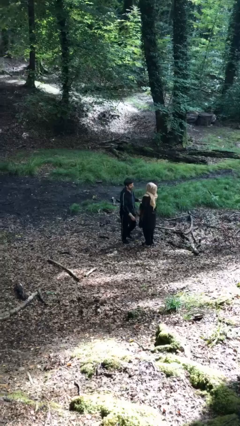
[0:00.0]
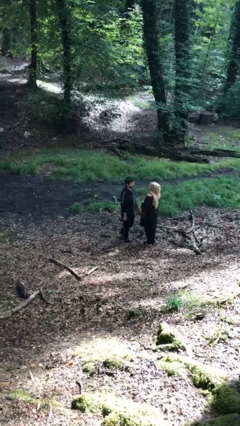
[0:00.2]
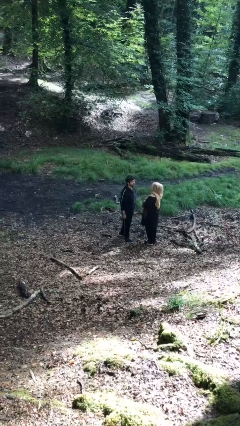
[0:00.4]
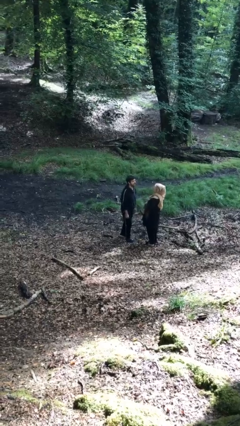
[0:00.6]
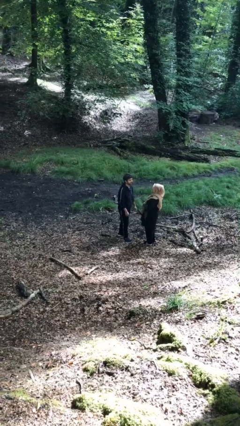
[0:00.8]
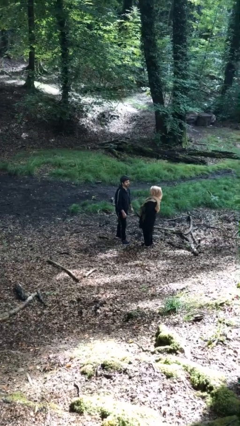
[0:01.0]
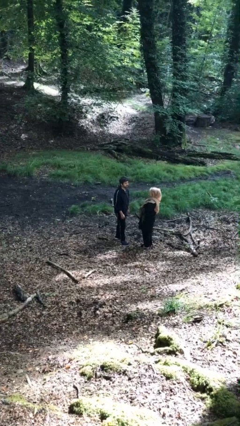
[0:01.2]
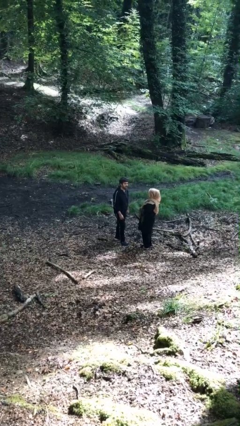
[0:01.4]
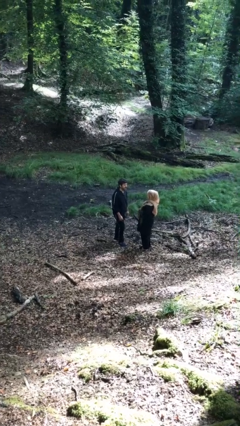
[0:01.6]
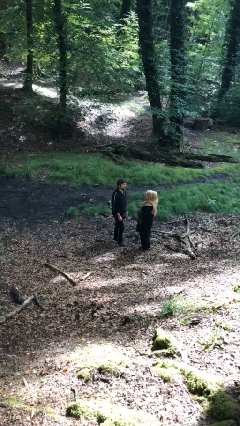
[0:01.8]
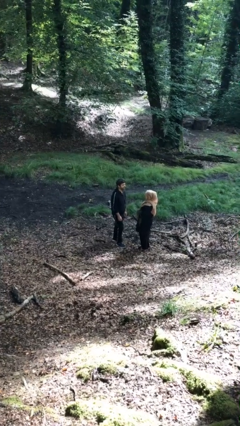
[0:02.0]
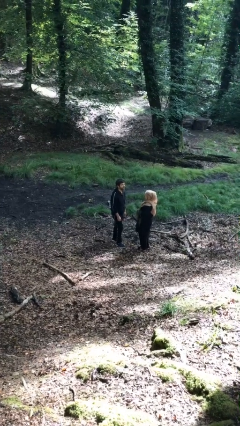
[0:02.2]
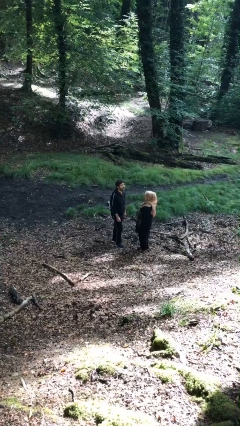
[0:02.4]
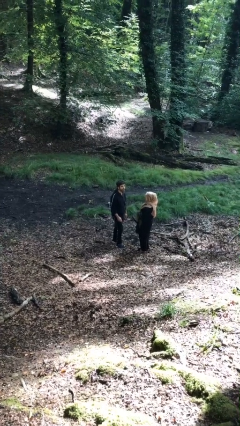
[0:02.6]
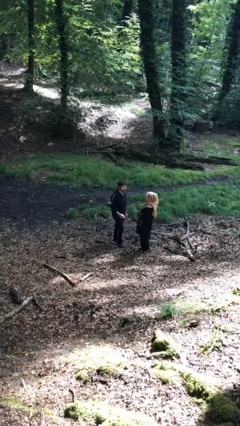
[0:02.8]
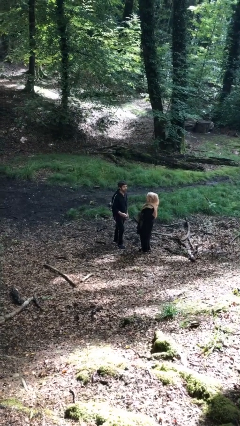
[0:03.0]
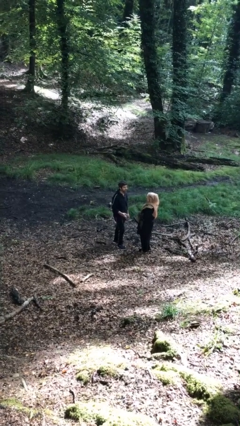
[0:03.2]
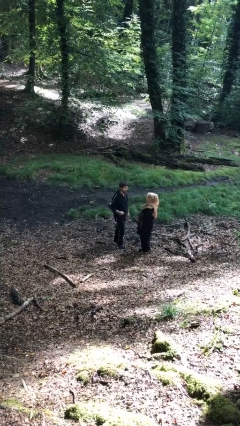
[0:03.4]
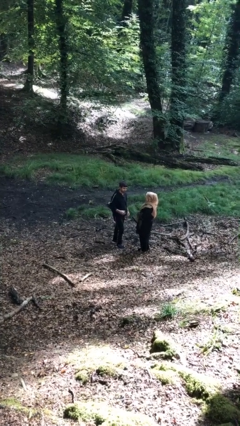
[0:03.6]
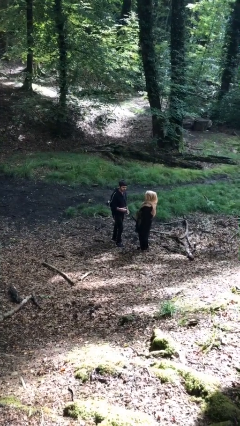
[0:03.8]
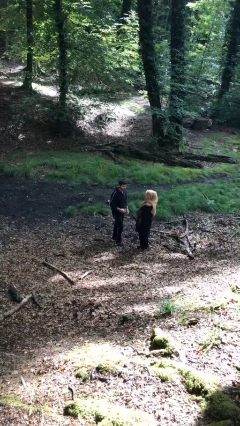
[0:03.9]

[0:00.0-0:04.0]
person talks to person

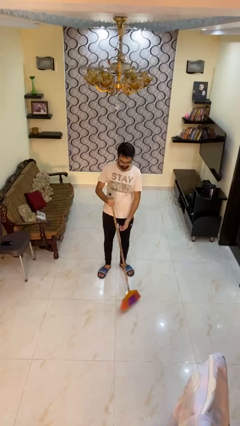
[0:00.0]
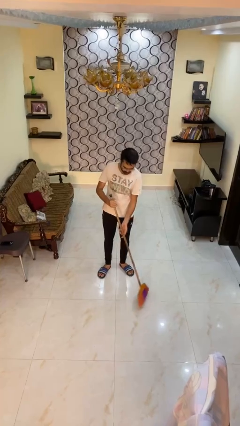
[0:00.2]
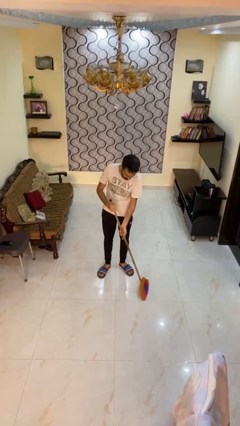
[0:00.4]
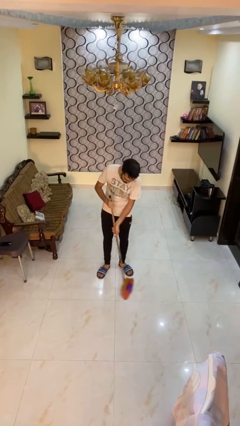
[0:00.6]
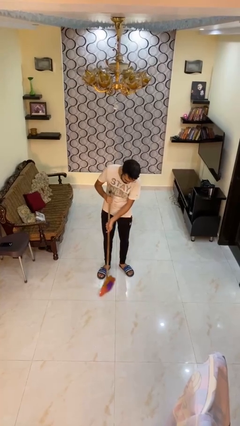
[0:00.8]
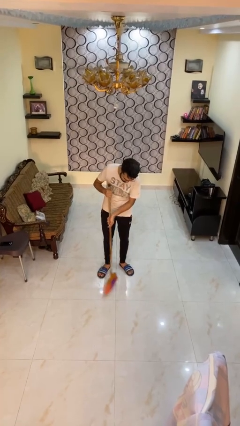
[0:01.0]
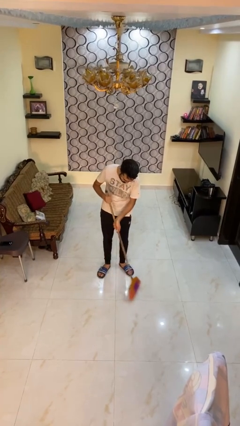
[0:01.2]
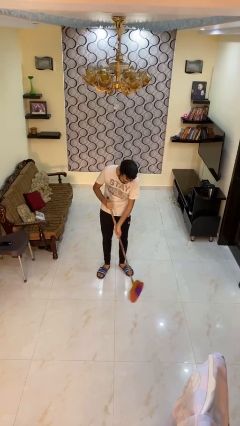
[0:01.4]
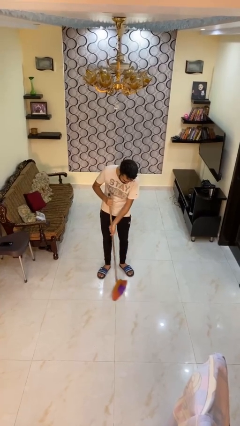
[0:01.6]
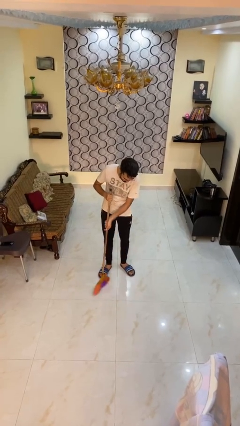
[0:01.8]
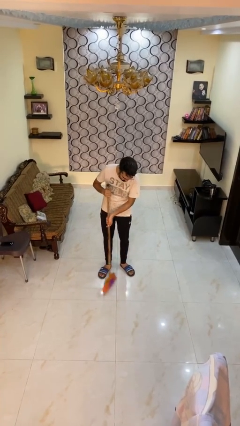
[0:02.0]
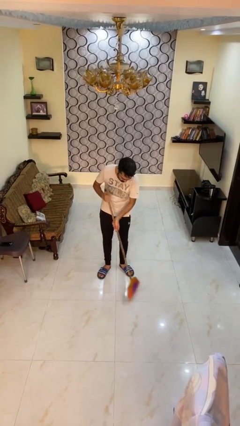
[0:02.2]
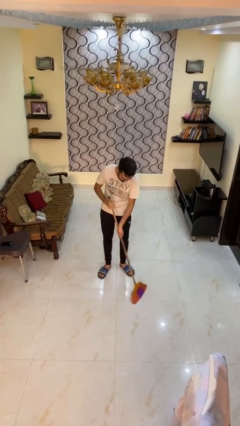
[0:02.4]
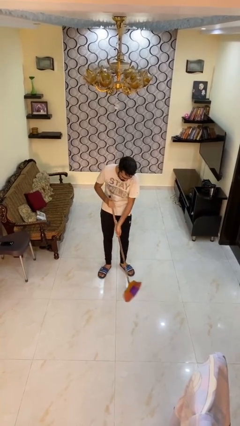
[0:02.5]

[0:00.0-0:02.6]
person mops

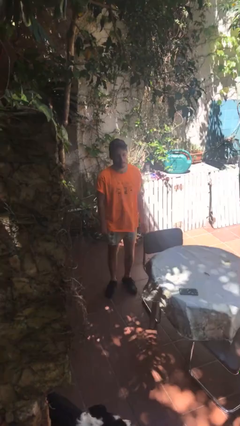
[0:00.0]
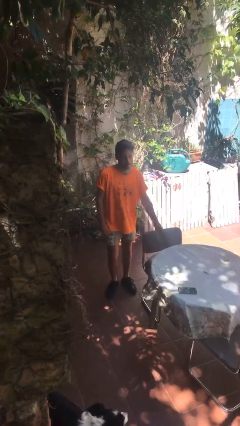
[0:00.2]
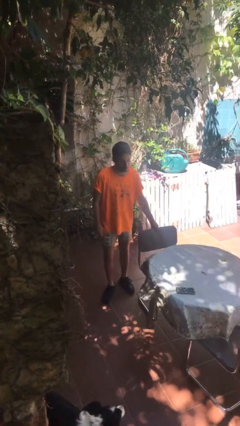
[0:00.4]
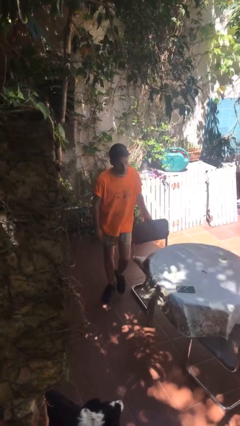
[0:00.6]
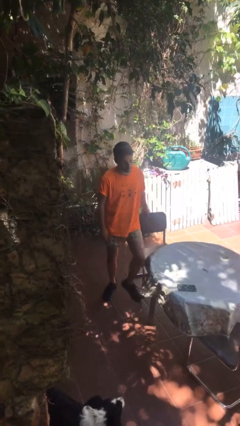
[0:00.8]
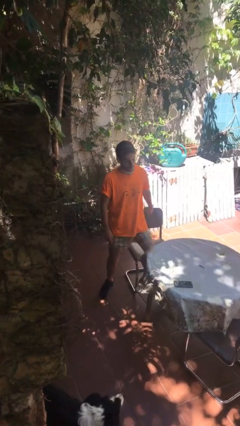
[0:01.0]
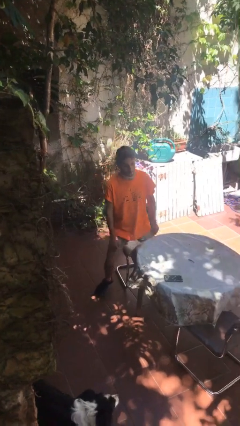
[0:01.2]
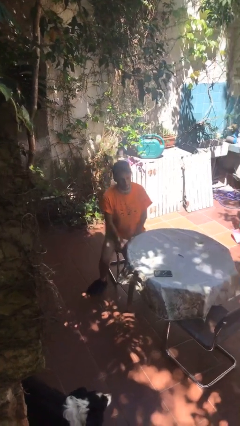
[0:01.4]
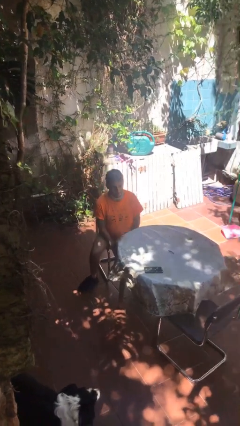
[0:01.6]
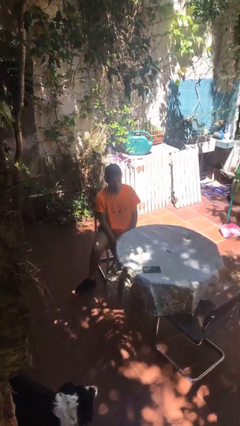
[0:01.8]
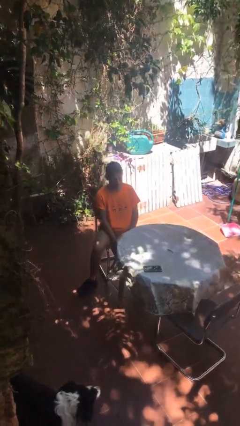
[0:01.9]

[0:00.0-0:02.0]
person sits down

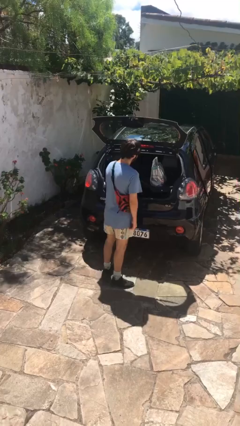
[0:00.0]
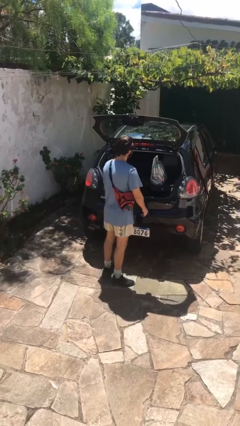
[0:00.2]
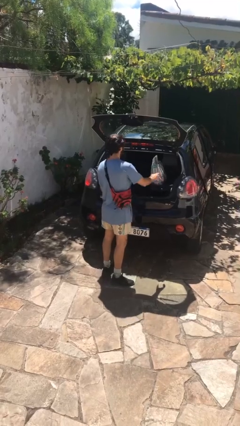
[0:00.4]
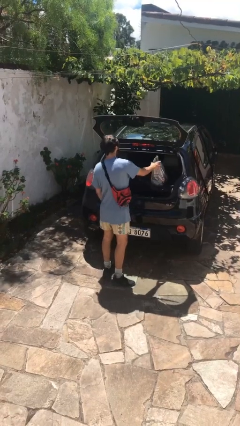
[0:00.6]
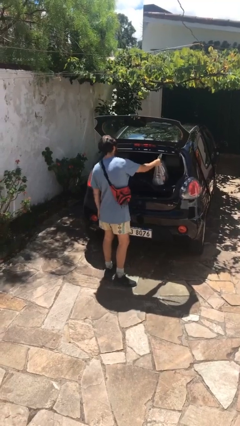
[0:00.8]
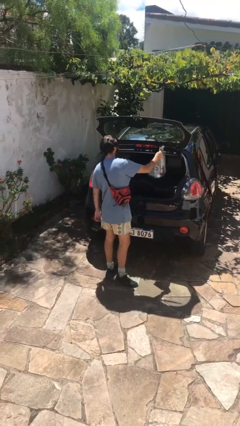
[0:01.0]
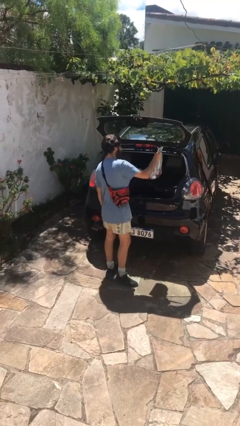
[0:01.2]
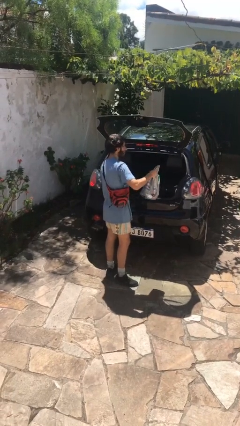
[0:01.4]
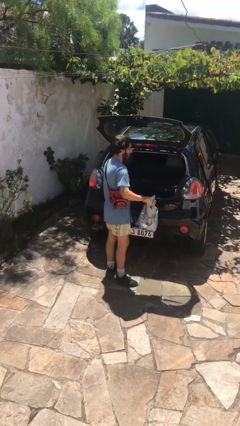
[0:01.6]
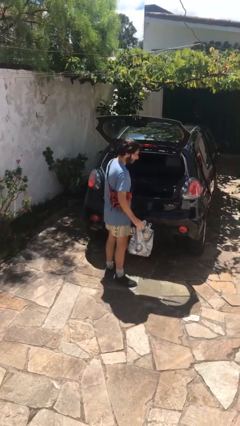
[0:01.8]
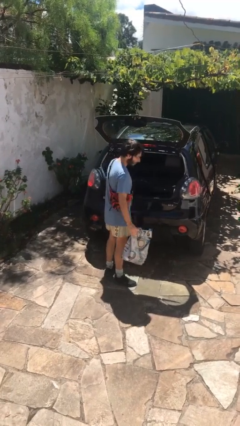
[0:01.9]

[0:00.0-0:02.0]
person unloads car

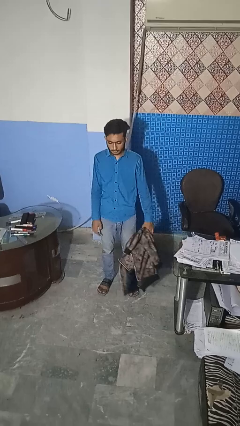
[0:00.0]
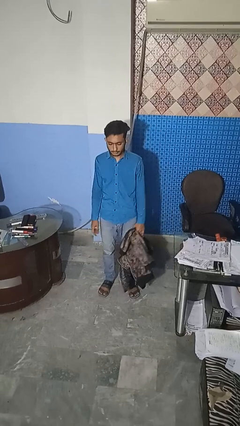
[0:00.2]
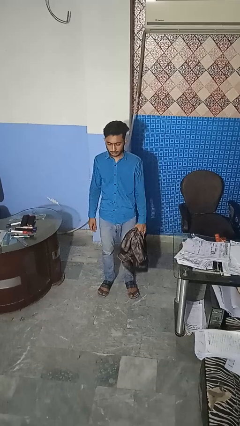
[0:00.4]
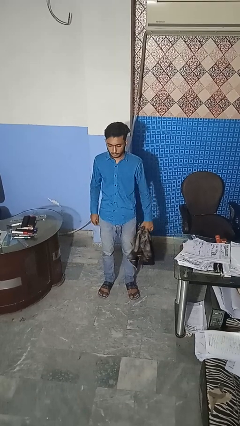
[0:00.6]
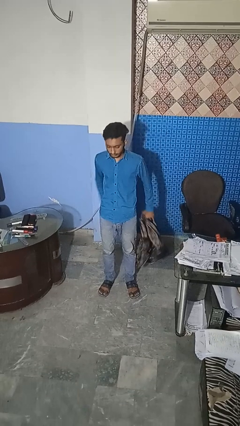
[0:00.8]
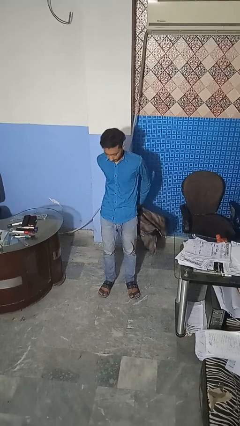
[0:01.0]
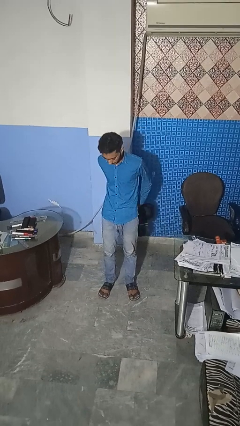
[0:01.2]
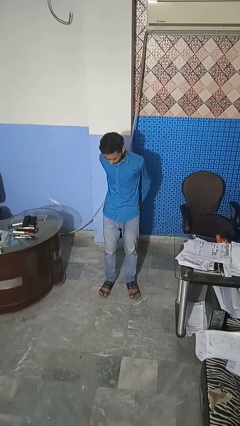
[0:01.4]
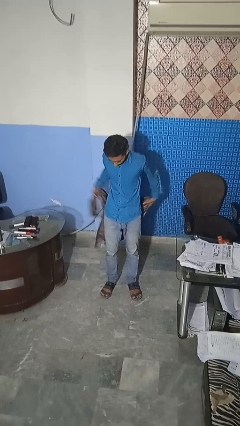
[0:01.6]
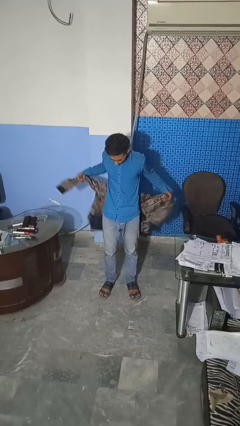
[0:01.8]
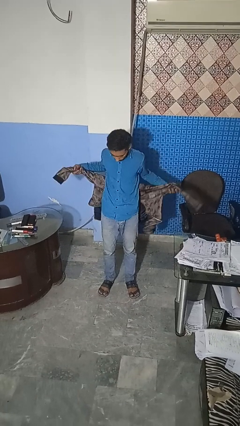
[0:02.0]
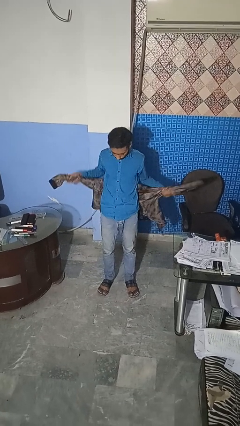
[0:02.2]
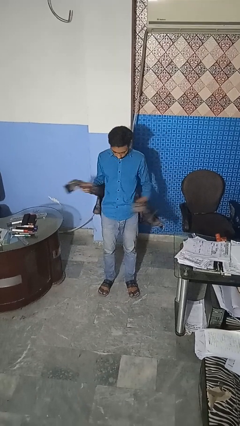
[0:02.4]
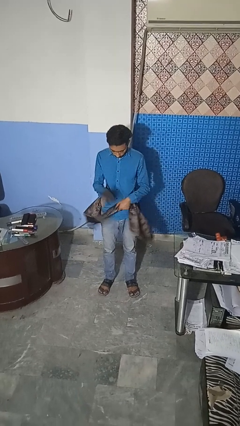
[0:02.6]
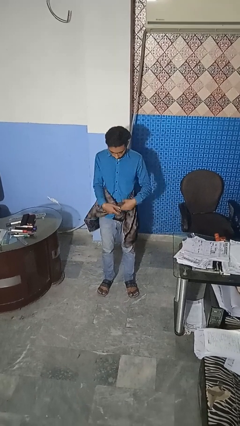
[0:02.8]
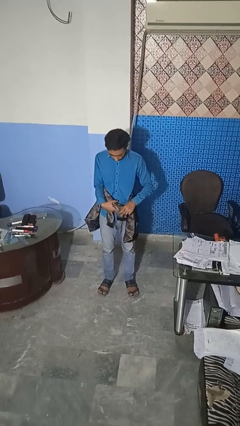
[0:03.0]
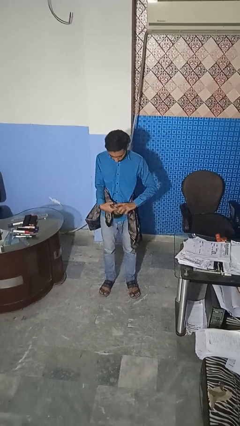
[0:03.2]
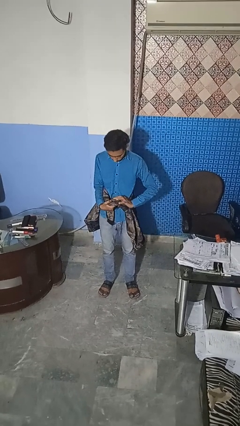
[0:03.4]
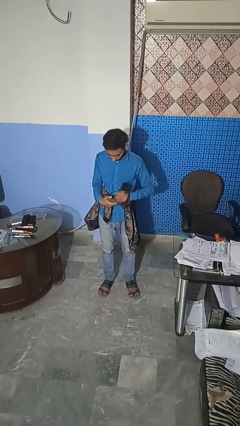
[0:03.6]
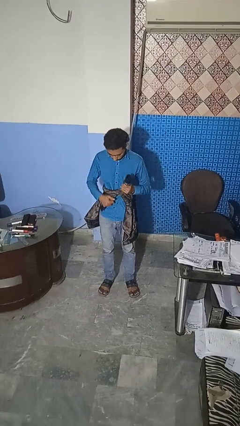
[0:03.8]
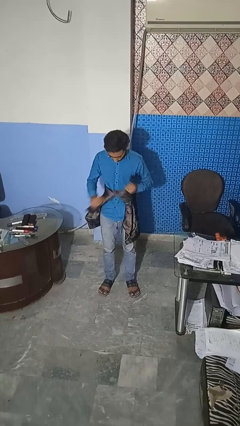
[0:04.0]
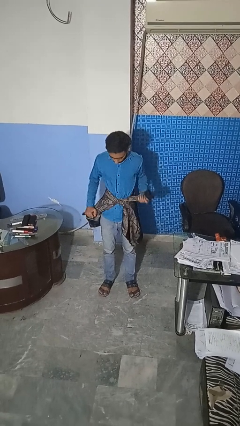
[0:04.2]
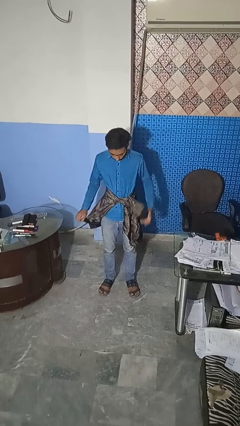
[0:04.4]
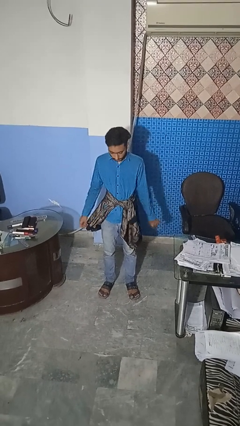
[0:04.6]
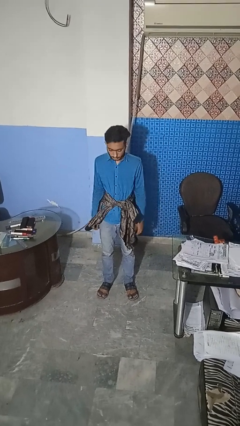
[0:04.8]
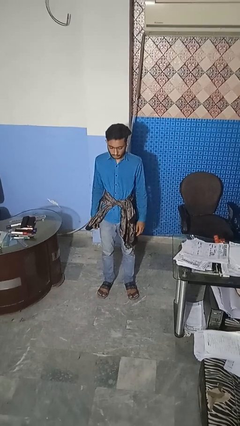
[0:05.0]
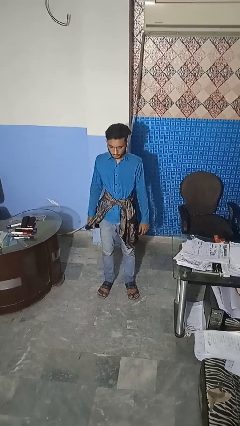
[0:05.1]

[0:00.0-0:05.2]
person ties jacket around waist

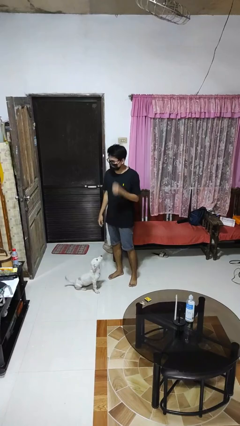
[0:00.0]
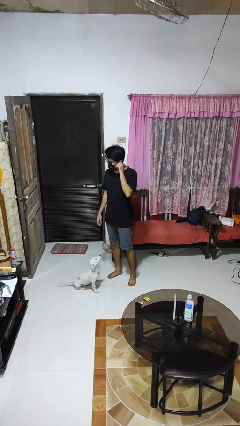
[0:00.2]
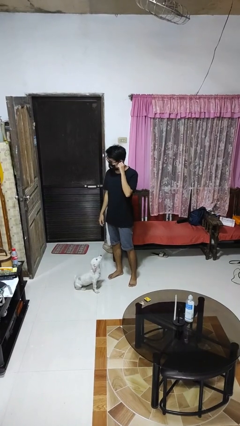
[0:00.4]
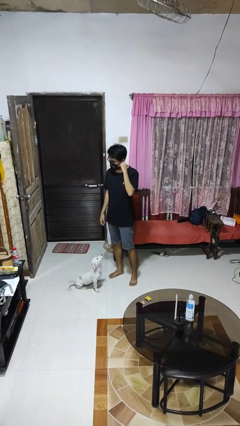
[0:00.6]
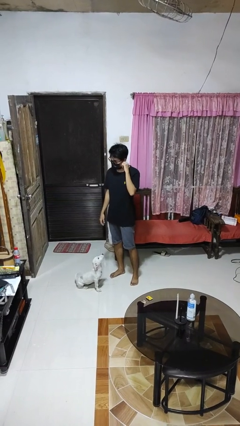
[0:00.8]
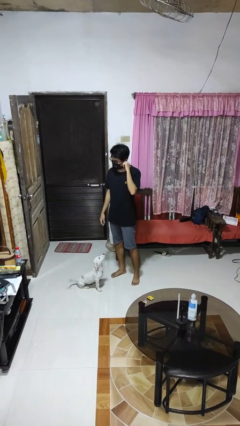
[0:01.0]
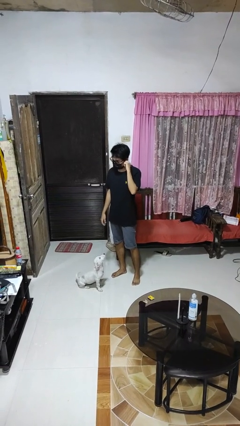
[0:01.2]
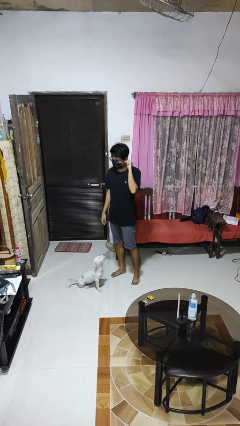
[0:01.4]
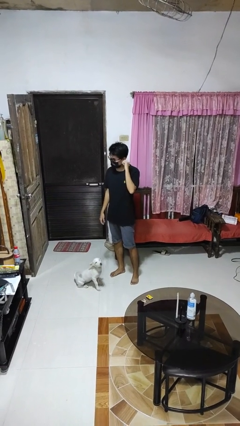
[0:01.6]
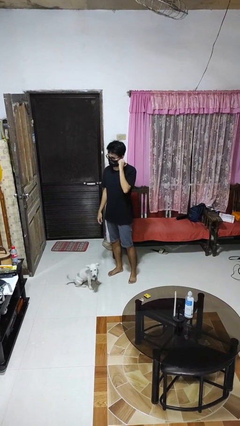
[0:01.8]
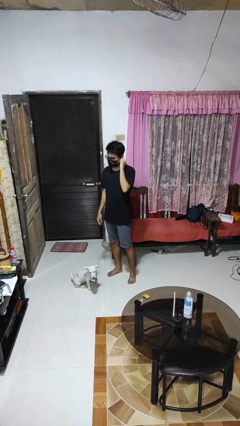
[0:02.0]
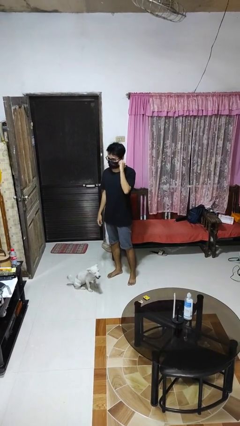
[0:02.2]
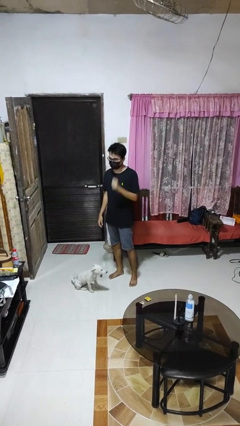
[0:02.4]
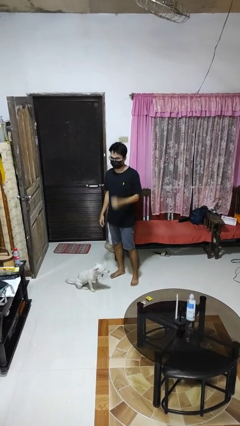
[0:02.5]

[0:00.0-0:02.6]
person touches earlobe
